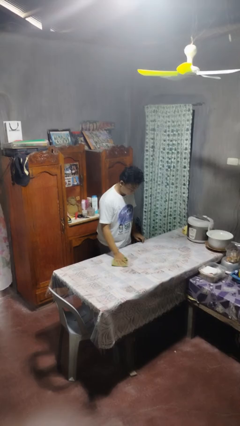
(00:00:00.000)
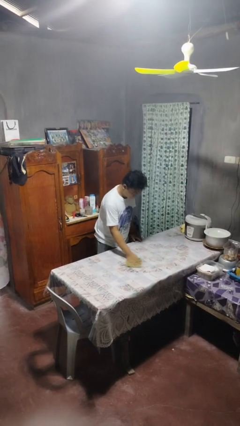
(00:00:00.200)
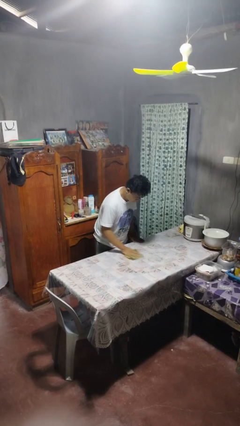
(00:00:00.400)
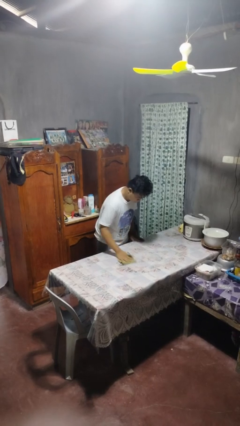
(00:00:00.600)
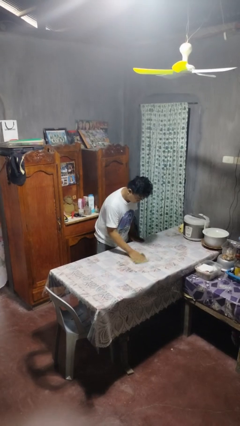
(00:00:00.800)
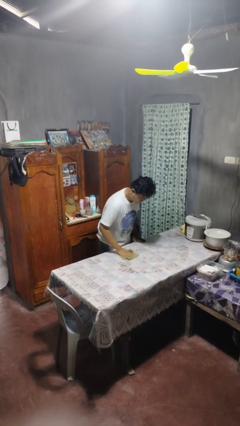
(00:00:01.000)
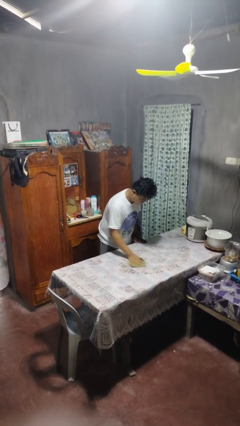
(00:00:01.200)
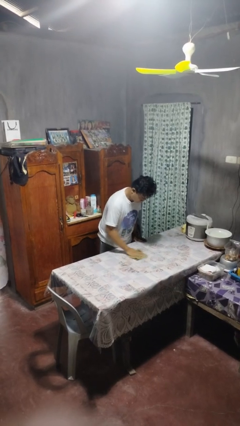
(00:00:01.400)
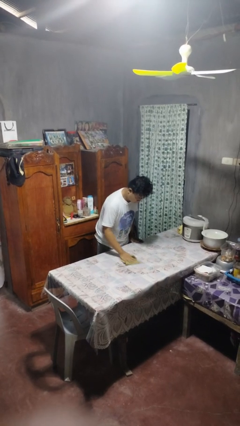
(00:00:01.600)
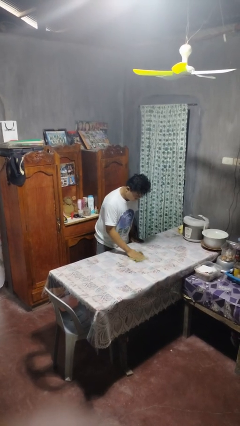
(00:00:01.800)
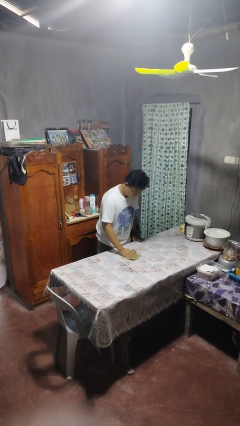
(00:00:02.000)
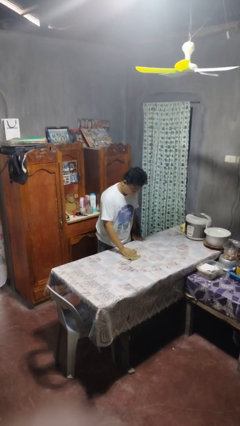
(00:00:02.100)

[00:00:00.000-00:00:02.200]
person cleans table with rag

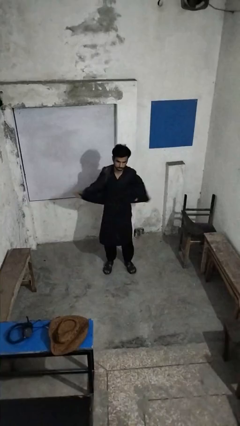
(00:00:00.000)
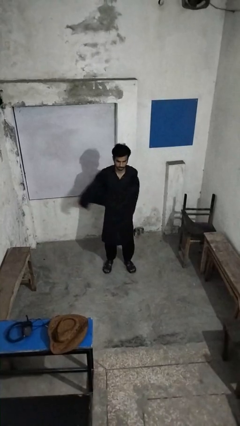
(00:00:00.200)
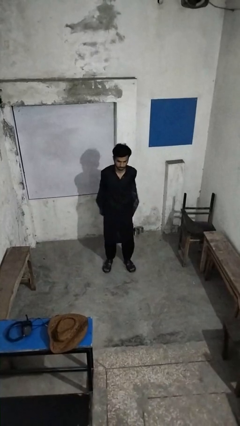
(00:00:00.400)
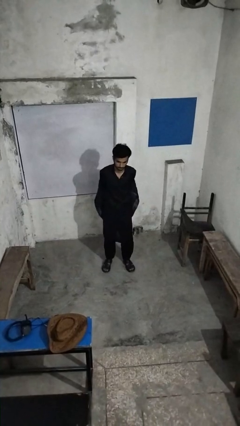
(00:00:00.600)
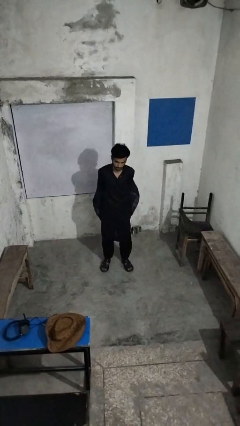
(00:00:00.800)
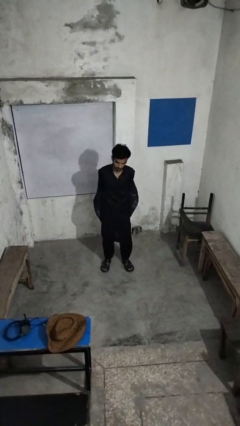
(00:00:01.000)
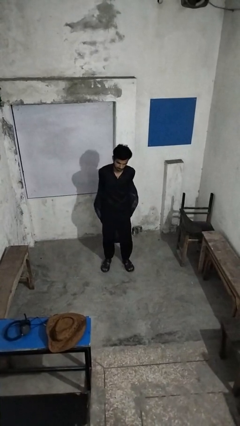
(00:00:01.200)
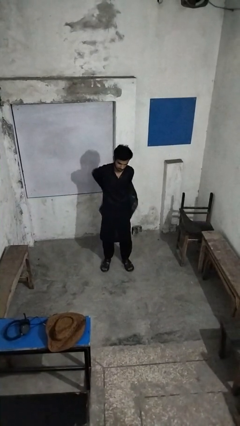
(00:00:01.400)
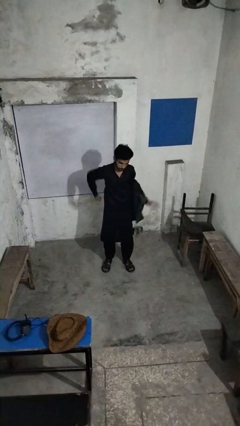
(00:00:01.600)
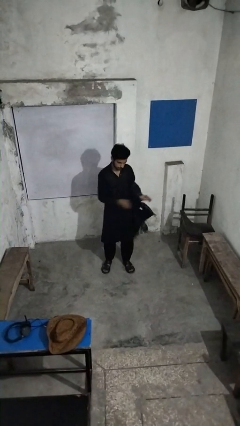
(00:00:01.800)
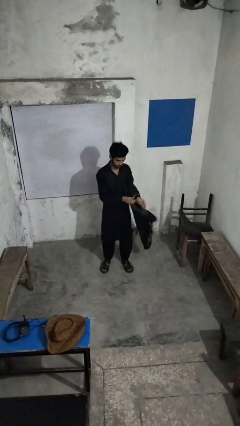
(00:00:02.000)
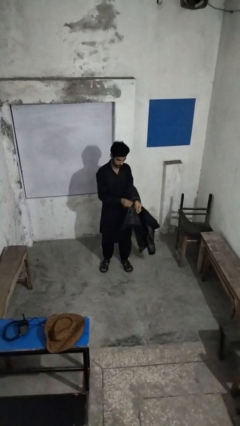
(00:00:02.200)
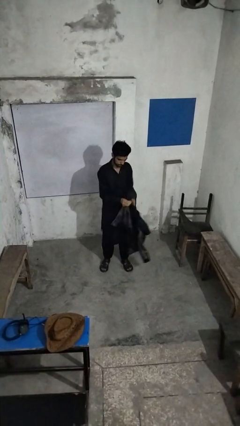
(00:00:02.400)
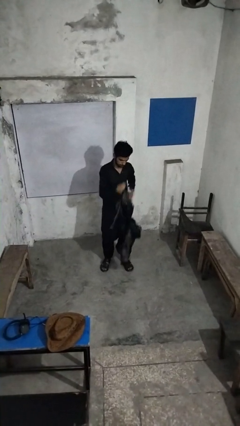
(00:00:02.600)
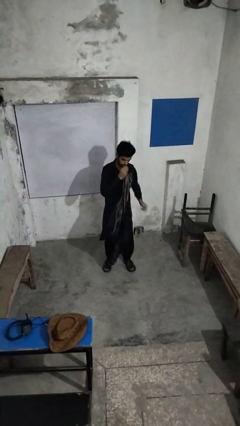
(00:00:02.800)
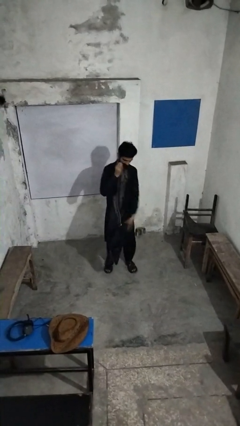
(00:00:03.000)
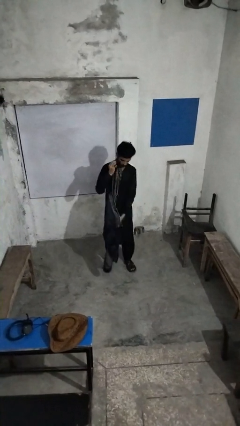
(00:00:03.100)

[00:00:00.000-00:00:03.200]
person takes off jacket

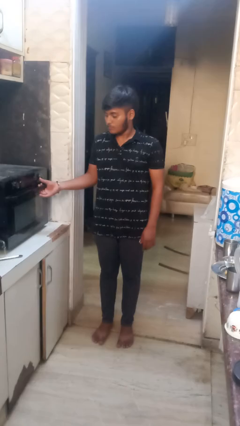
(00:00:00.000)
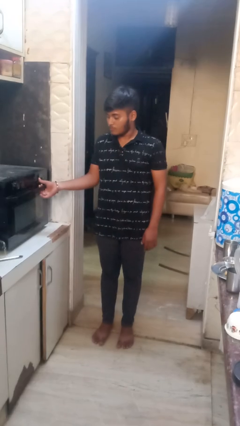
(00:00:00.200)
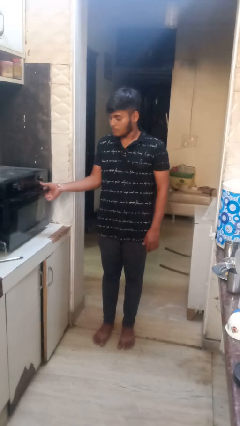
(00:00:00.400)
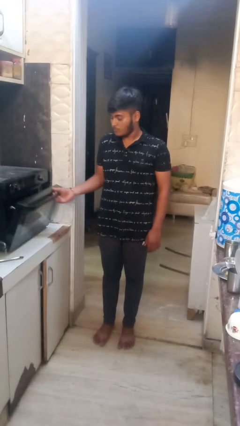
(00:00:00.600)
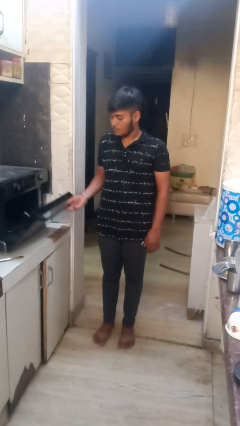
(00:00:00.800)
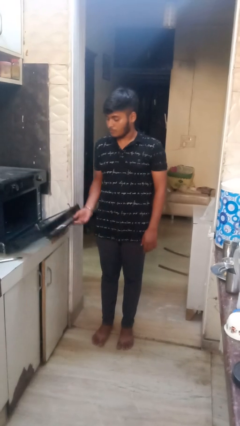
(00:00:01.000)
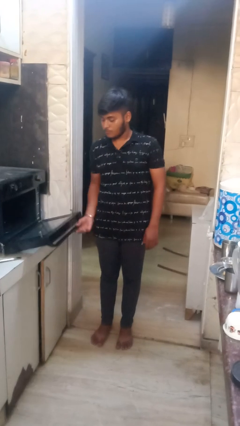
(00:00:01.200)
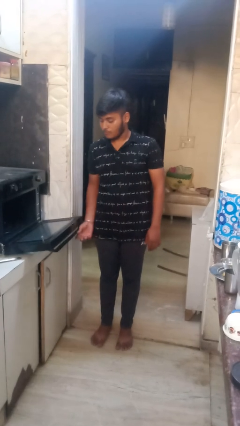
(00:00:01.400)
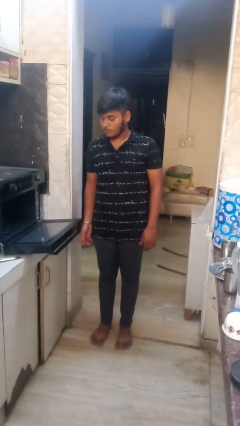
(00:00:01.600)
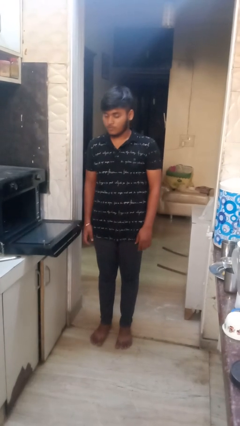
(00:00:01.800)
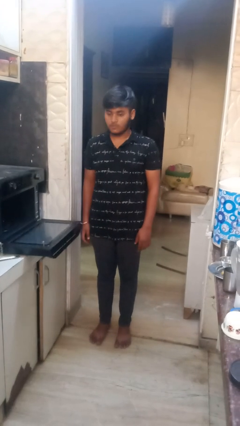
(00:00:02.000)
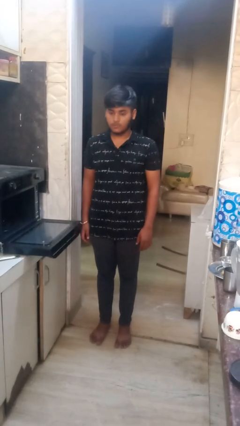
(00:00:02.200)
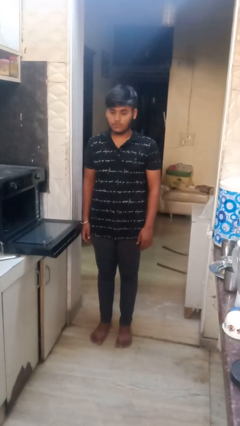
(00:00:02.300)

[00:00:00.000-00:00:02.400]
person opens oven door

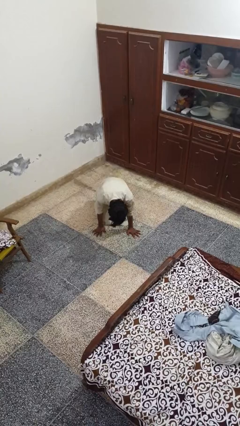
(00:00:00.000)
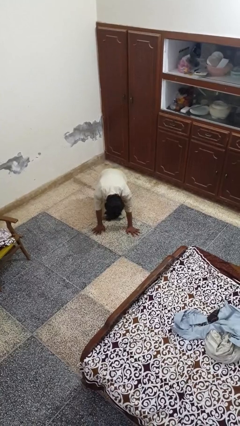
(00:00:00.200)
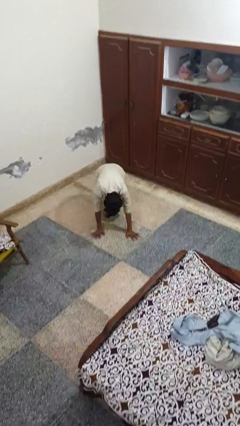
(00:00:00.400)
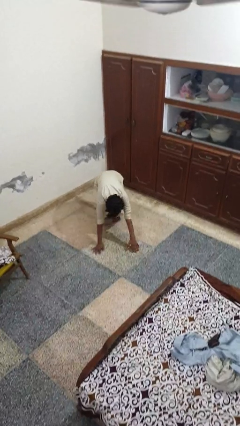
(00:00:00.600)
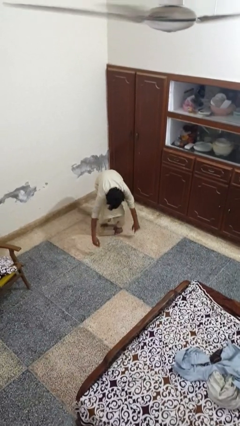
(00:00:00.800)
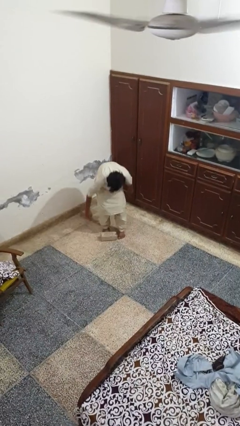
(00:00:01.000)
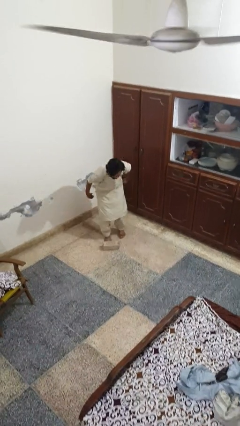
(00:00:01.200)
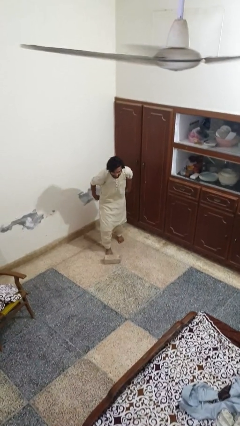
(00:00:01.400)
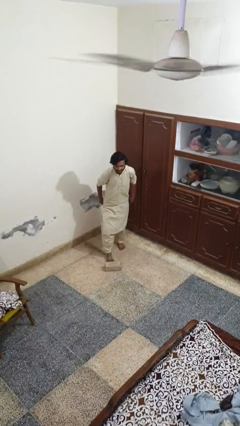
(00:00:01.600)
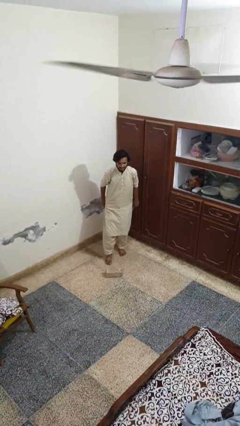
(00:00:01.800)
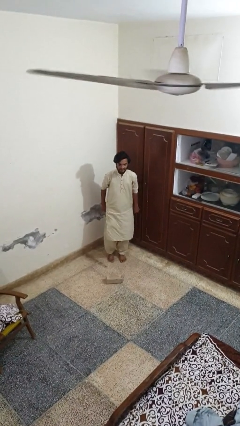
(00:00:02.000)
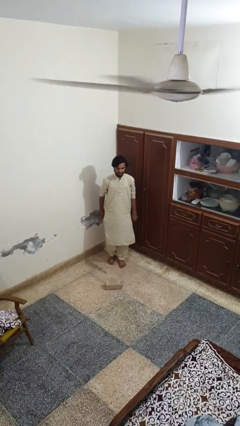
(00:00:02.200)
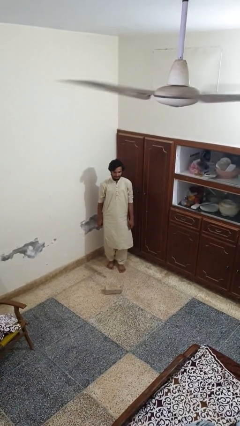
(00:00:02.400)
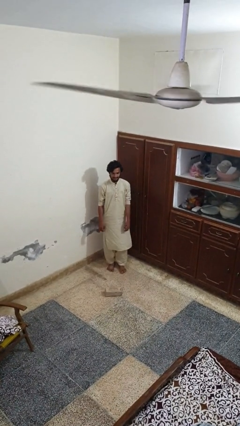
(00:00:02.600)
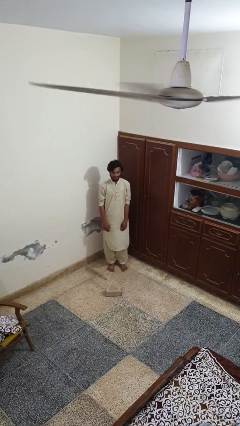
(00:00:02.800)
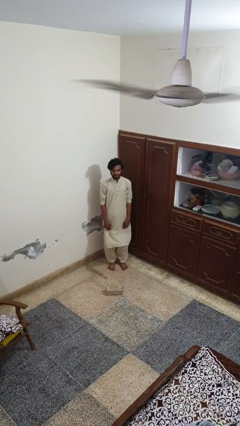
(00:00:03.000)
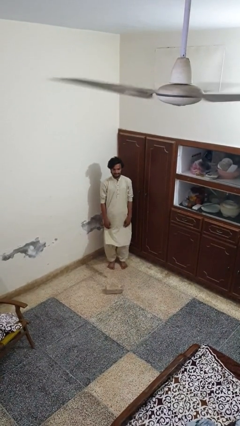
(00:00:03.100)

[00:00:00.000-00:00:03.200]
person stands up from floor

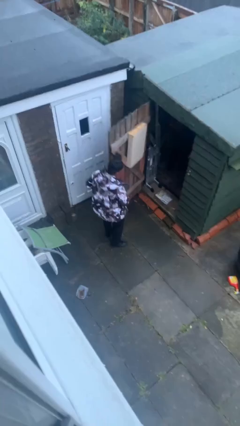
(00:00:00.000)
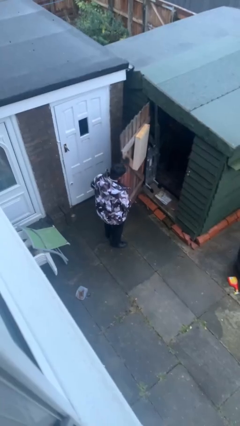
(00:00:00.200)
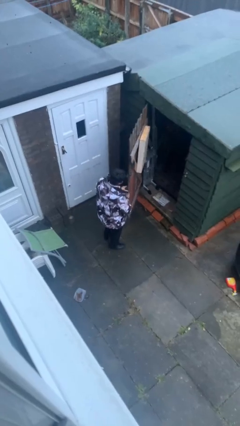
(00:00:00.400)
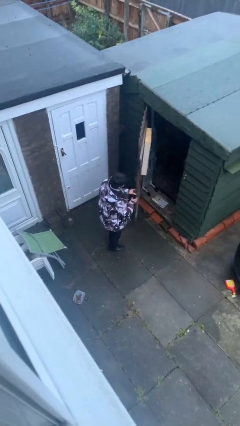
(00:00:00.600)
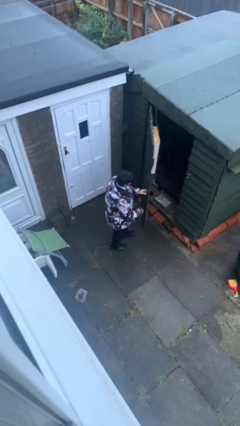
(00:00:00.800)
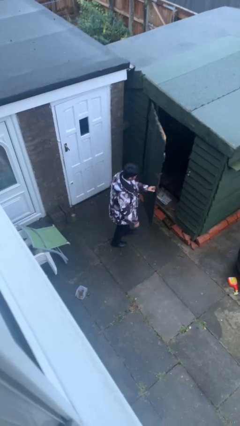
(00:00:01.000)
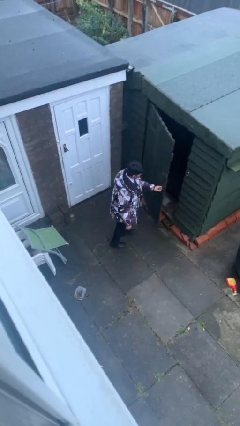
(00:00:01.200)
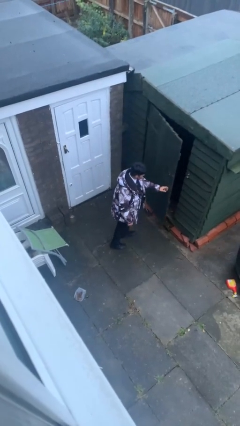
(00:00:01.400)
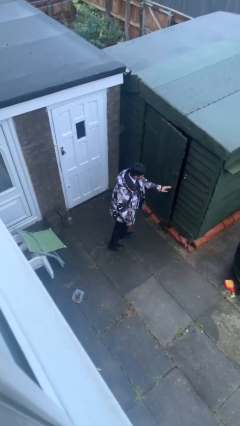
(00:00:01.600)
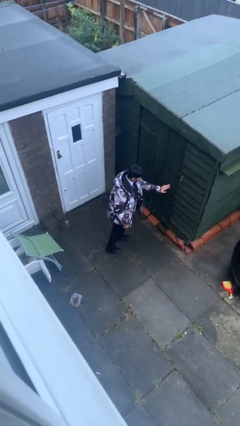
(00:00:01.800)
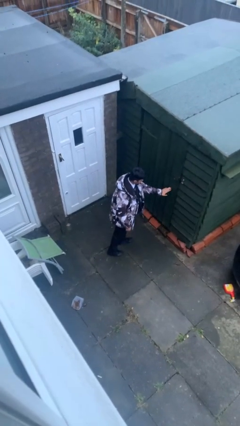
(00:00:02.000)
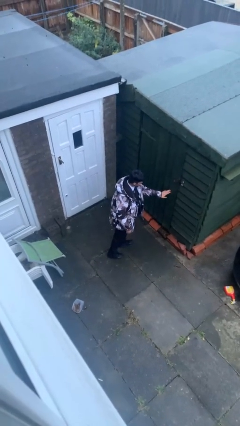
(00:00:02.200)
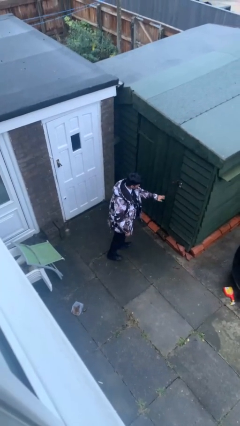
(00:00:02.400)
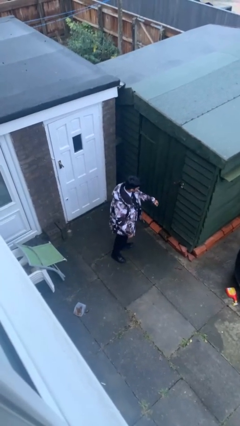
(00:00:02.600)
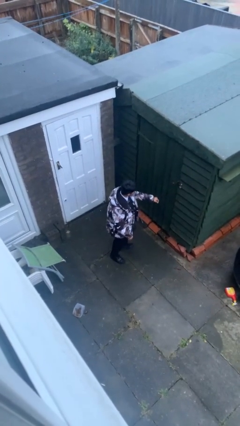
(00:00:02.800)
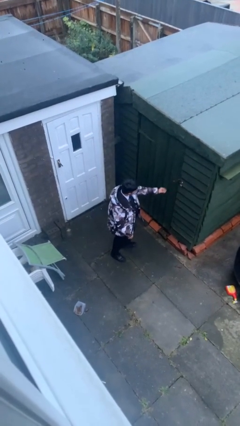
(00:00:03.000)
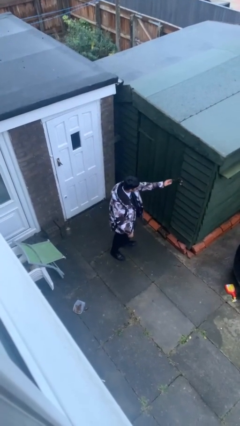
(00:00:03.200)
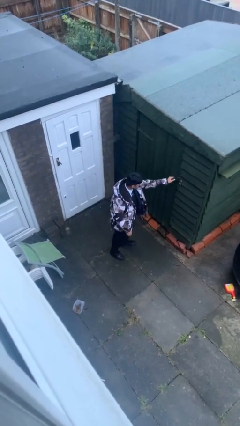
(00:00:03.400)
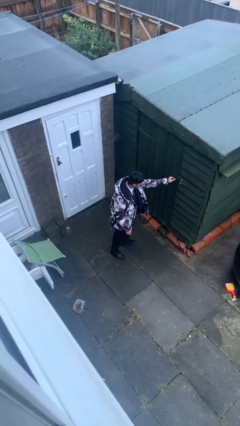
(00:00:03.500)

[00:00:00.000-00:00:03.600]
person closes facility door

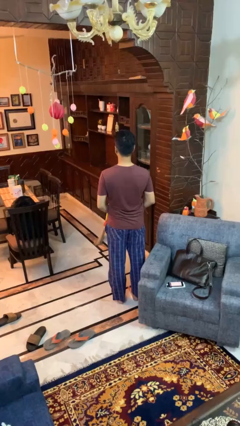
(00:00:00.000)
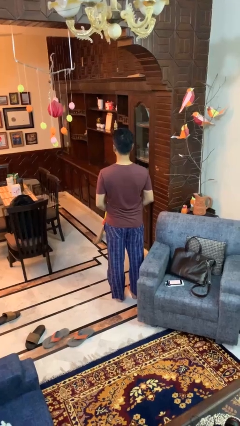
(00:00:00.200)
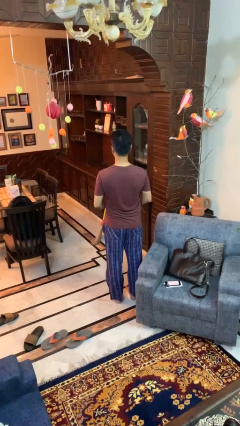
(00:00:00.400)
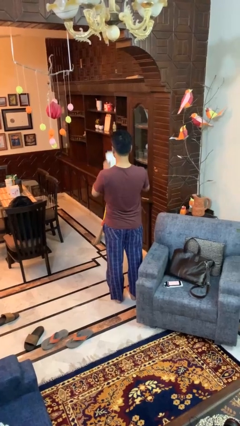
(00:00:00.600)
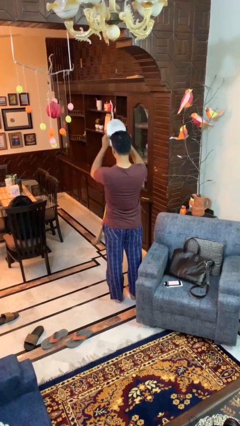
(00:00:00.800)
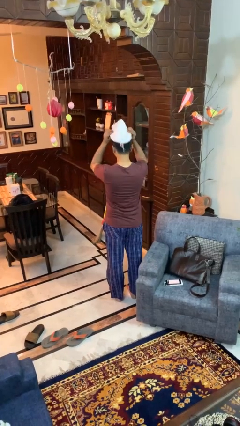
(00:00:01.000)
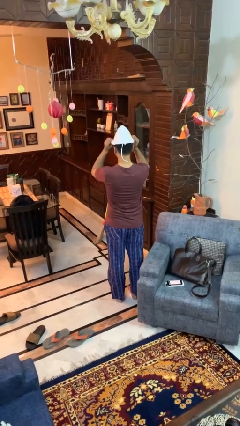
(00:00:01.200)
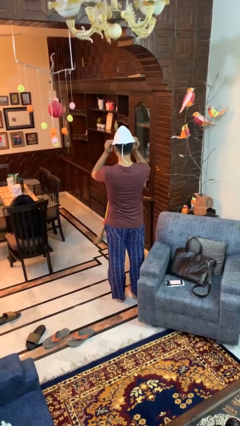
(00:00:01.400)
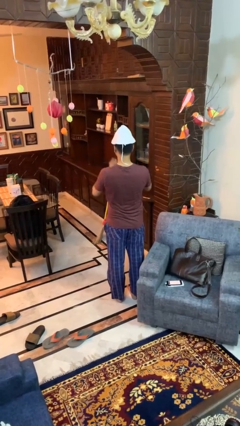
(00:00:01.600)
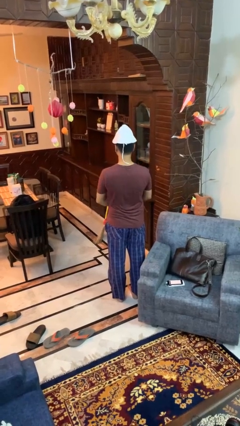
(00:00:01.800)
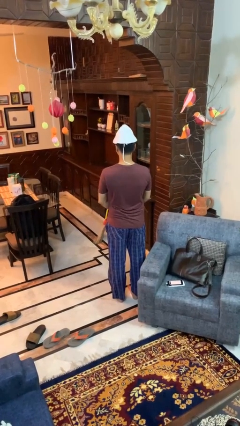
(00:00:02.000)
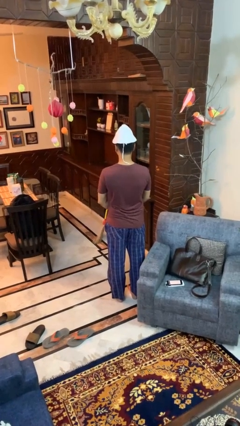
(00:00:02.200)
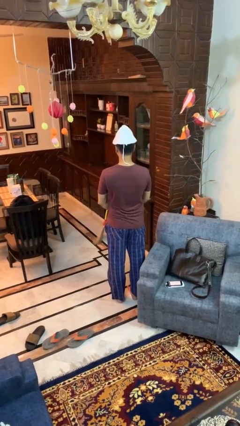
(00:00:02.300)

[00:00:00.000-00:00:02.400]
person puts on hat

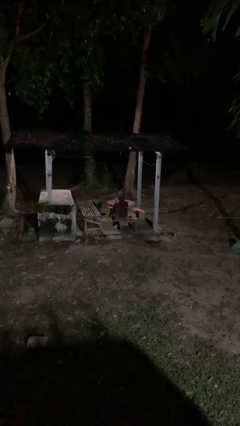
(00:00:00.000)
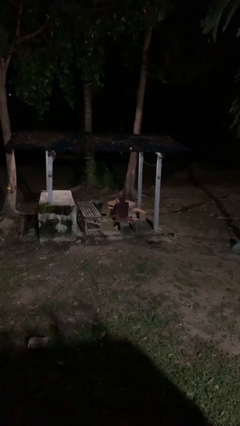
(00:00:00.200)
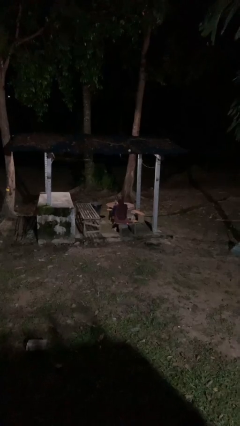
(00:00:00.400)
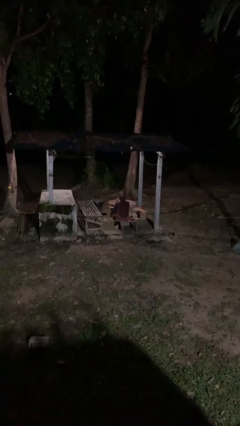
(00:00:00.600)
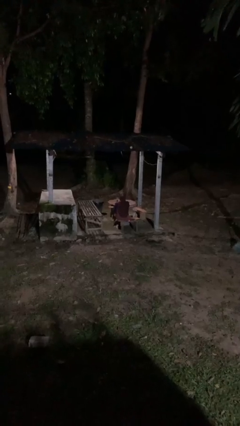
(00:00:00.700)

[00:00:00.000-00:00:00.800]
person gestures cut
